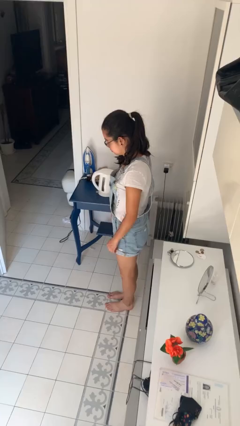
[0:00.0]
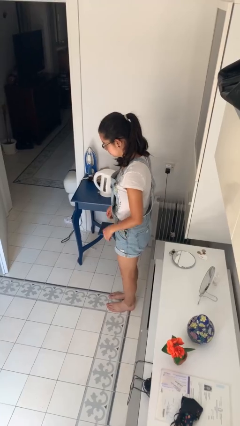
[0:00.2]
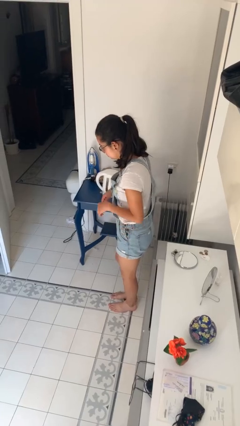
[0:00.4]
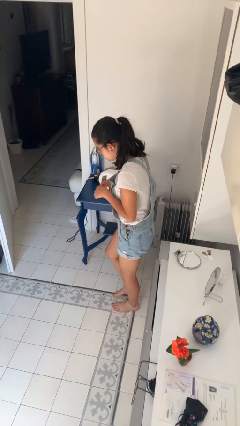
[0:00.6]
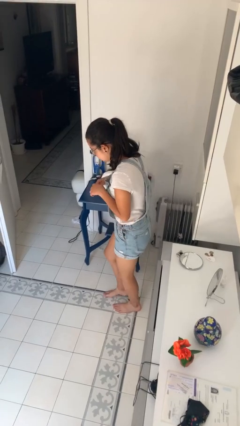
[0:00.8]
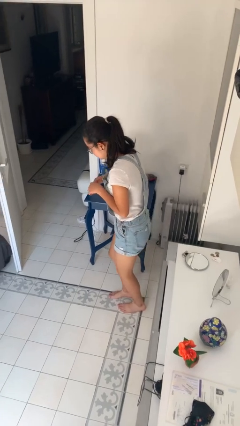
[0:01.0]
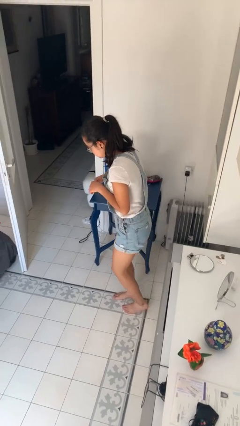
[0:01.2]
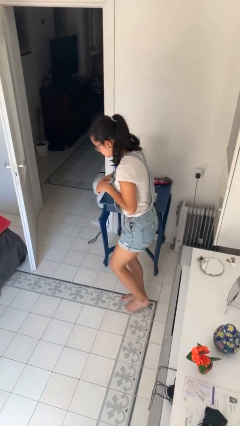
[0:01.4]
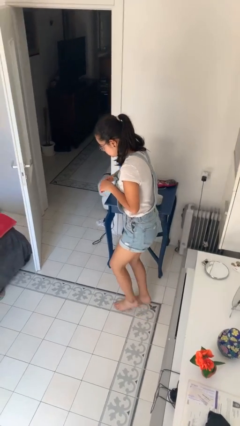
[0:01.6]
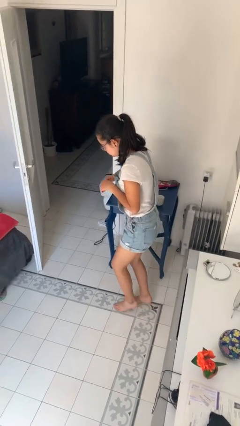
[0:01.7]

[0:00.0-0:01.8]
person walks tiptoe

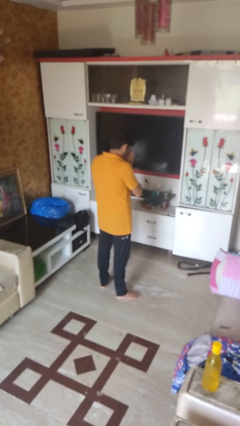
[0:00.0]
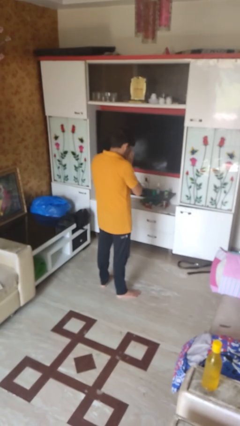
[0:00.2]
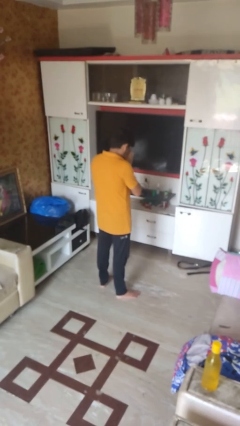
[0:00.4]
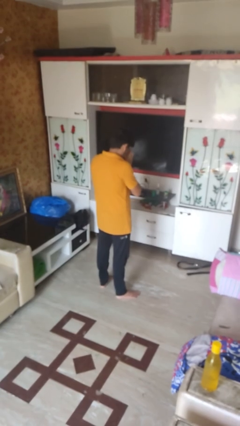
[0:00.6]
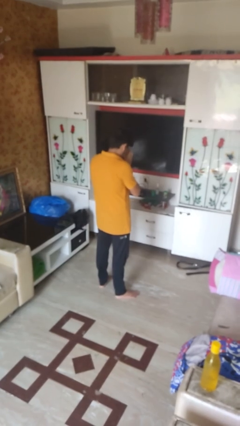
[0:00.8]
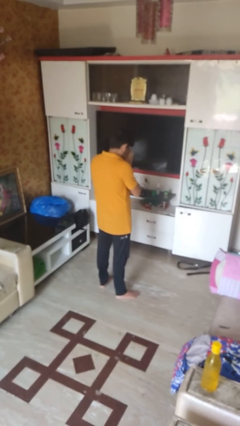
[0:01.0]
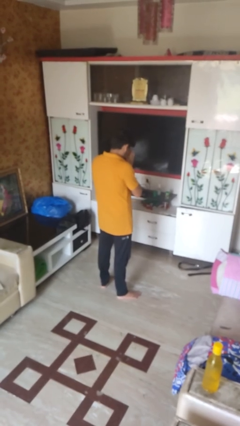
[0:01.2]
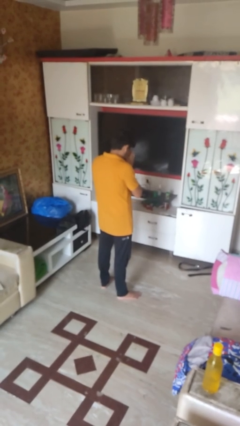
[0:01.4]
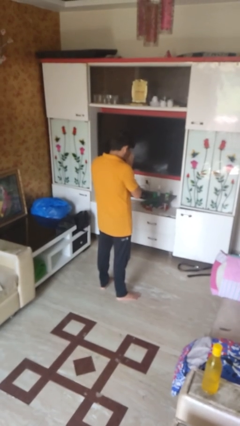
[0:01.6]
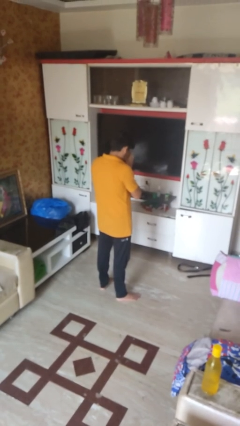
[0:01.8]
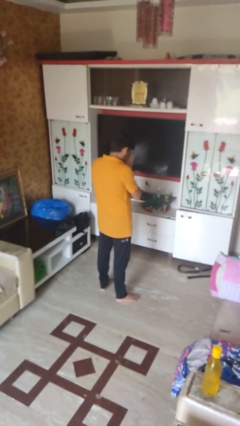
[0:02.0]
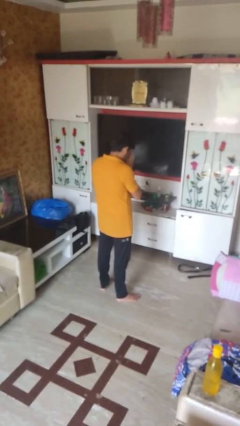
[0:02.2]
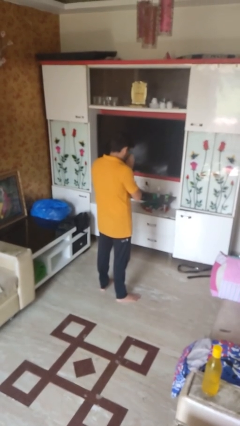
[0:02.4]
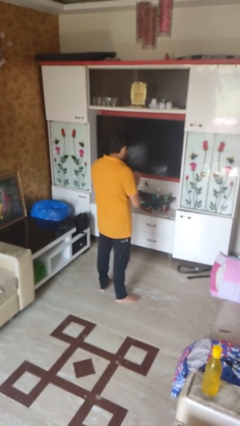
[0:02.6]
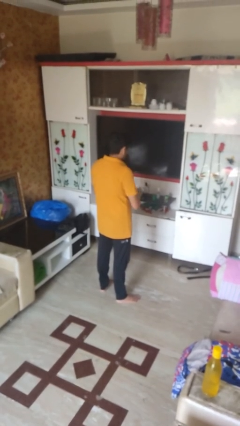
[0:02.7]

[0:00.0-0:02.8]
person prays

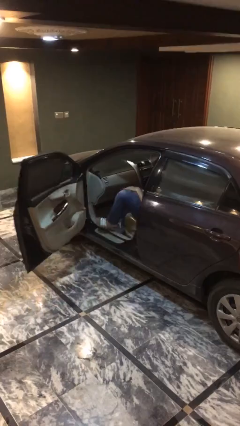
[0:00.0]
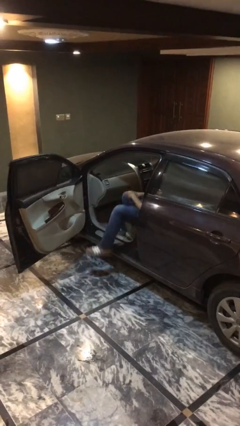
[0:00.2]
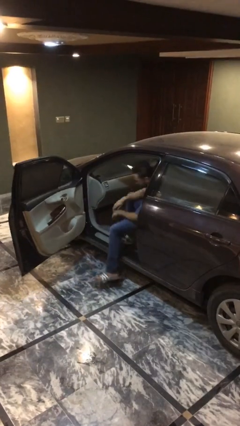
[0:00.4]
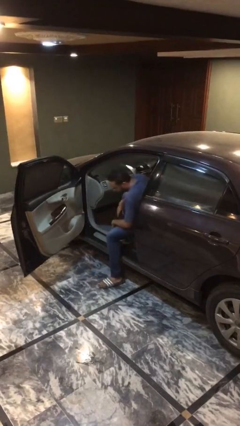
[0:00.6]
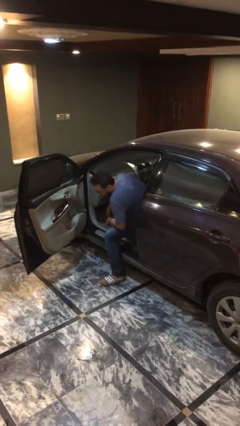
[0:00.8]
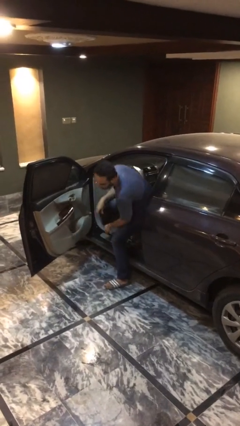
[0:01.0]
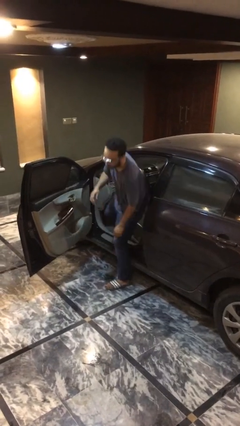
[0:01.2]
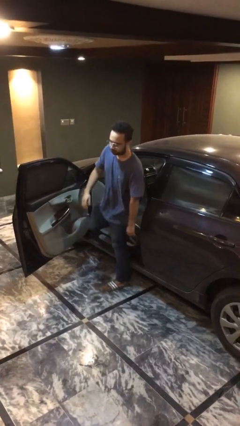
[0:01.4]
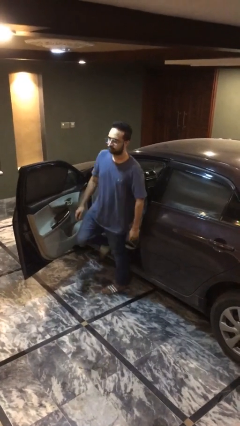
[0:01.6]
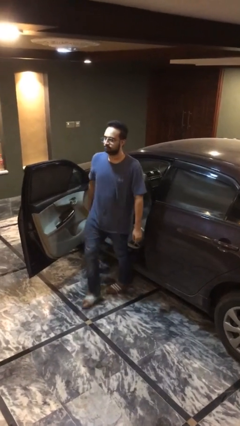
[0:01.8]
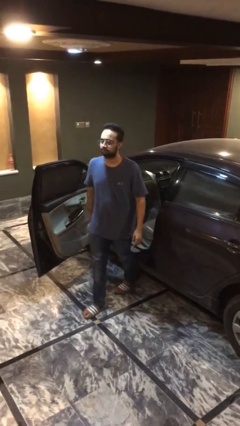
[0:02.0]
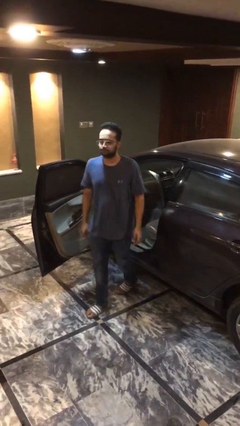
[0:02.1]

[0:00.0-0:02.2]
person exits car

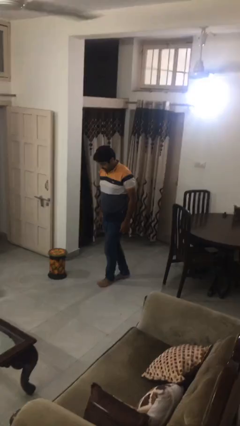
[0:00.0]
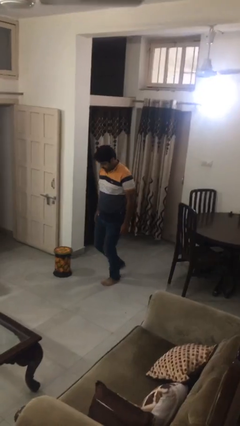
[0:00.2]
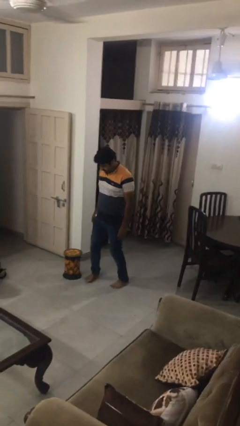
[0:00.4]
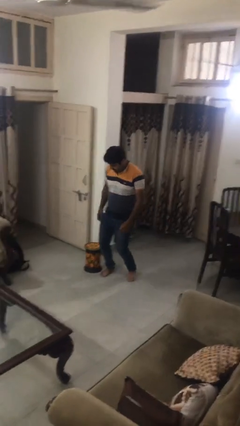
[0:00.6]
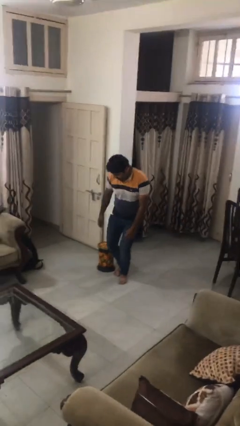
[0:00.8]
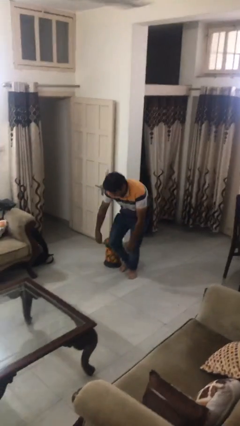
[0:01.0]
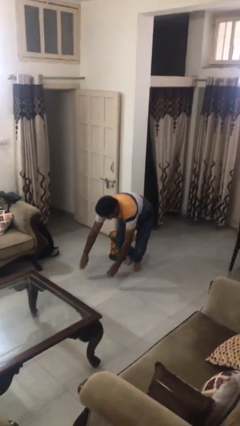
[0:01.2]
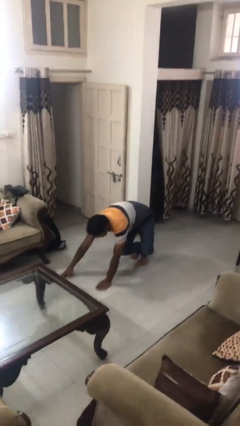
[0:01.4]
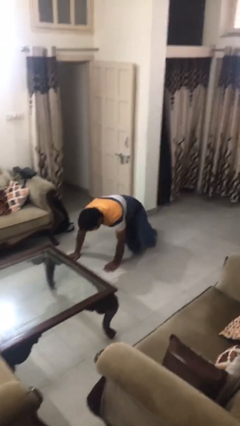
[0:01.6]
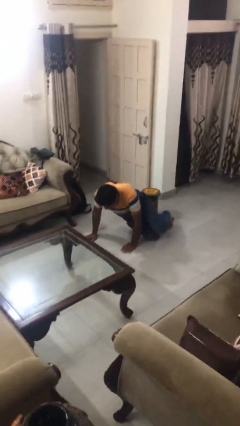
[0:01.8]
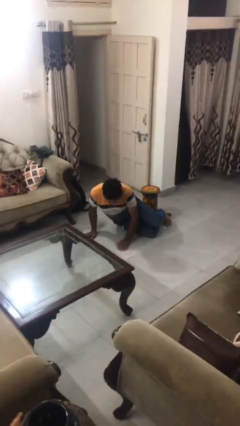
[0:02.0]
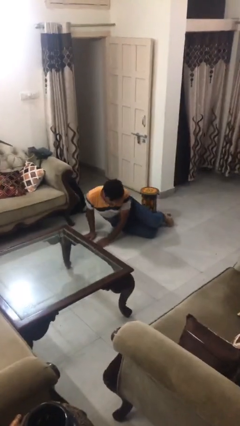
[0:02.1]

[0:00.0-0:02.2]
person trips on object on floor

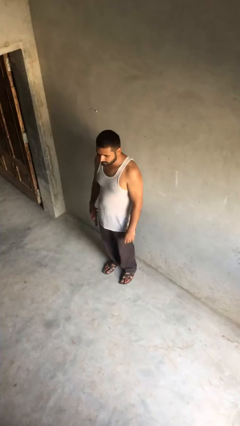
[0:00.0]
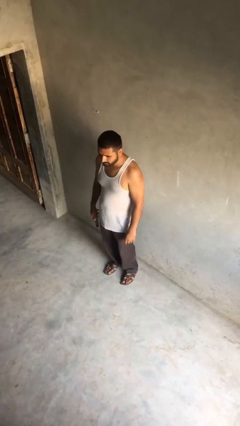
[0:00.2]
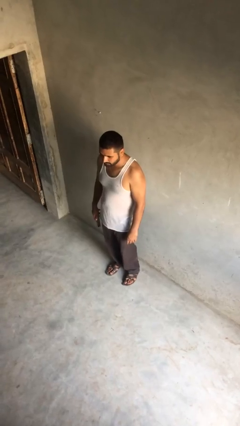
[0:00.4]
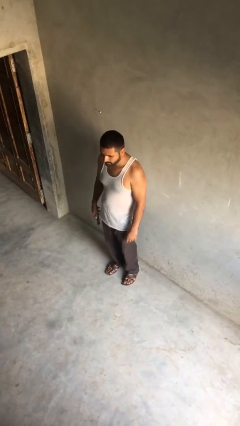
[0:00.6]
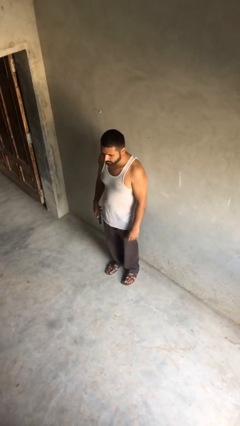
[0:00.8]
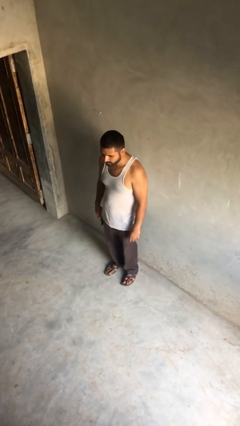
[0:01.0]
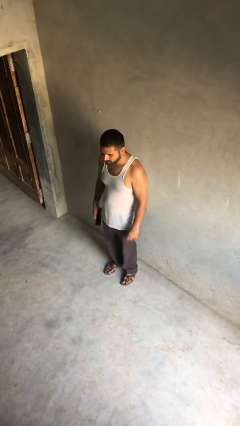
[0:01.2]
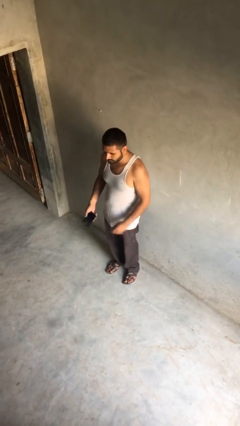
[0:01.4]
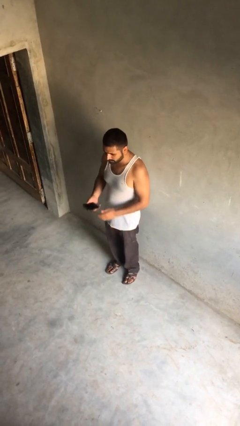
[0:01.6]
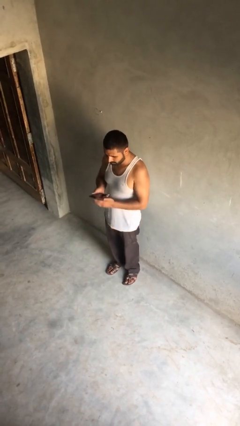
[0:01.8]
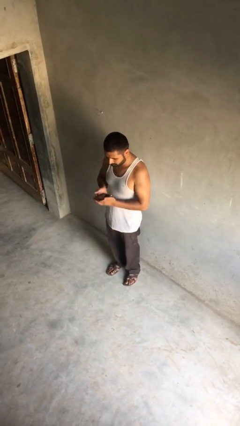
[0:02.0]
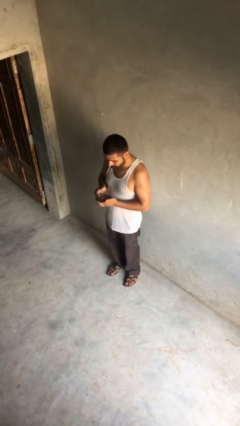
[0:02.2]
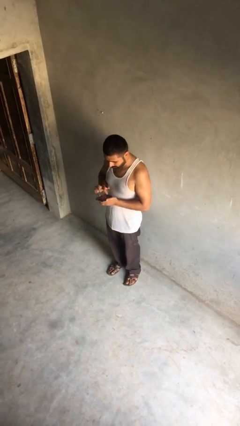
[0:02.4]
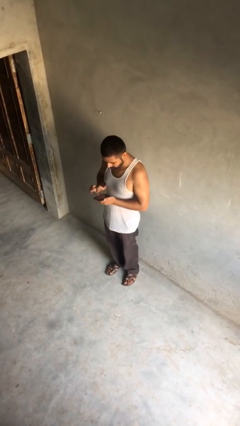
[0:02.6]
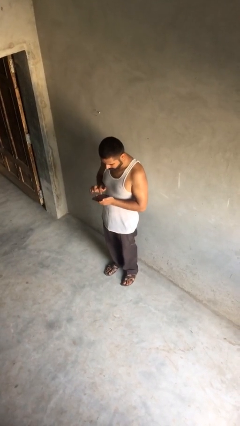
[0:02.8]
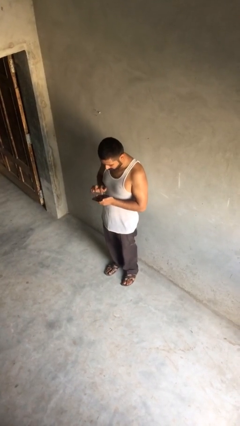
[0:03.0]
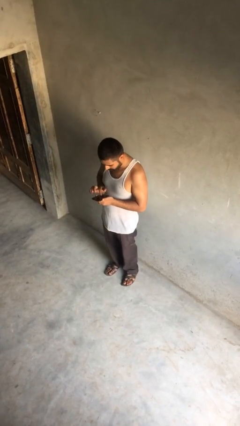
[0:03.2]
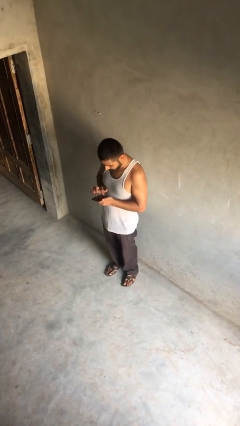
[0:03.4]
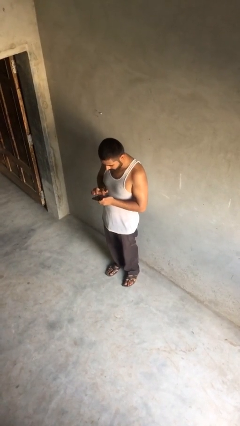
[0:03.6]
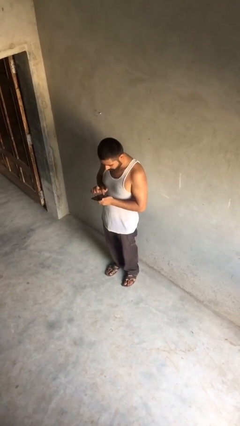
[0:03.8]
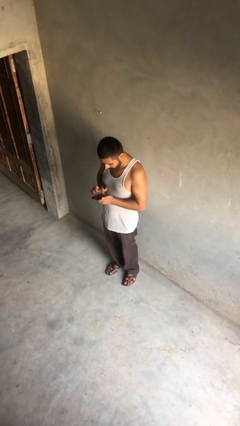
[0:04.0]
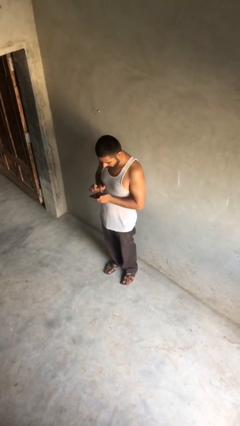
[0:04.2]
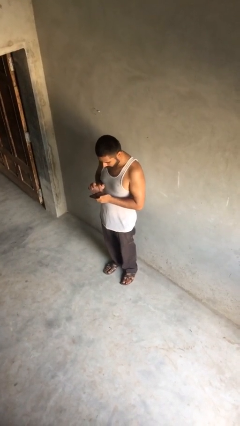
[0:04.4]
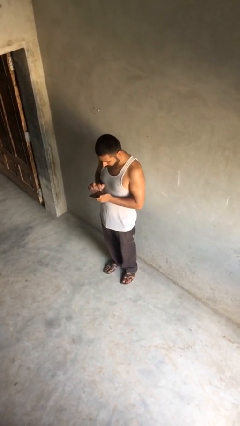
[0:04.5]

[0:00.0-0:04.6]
person texts on phone

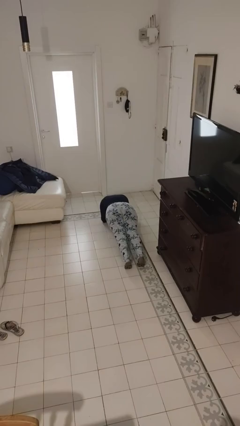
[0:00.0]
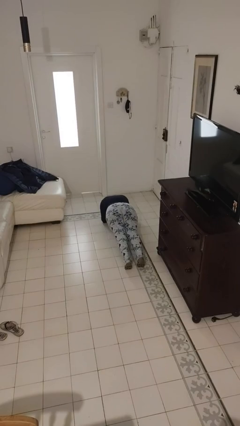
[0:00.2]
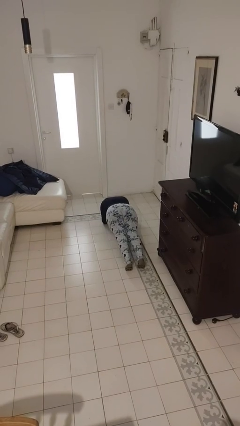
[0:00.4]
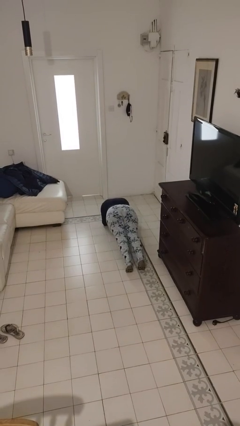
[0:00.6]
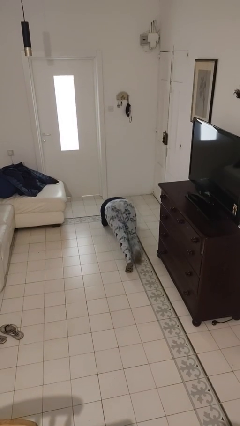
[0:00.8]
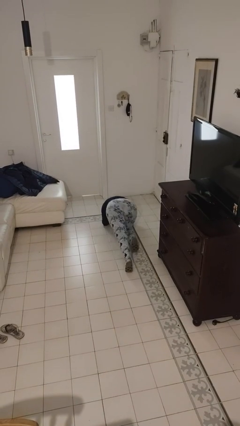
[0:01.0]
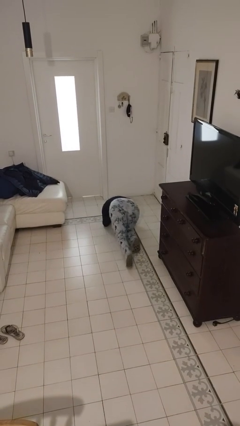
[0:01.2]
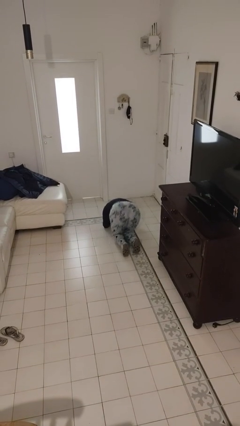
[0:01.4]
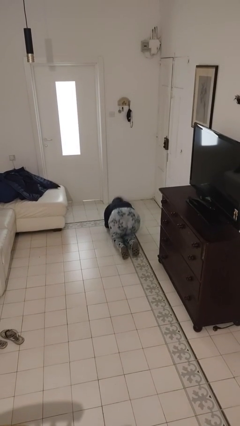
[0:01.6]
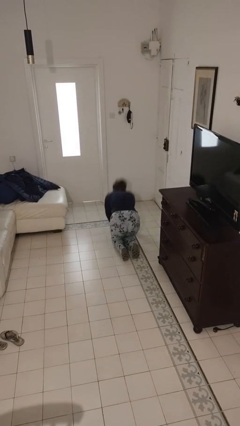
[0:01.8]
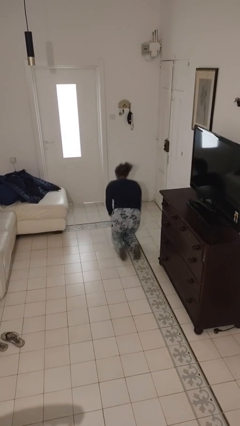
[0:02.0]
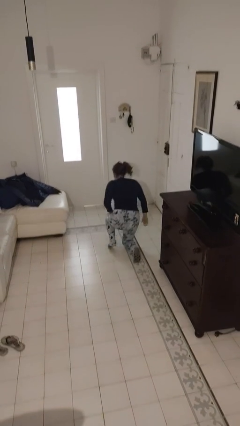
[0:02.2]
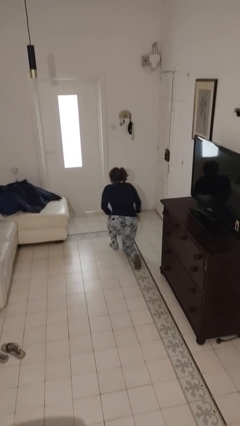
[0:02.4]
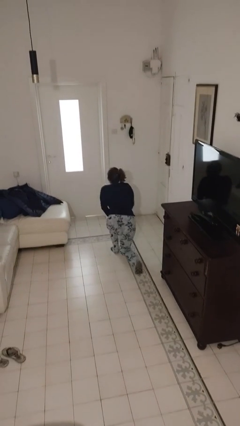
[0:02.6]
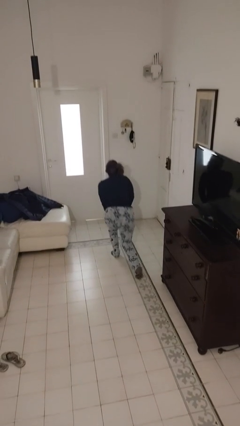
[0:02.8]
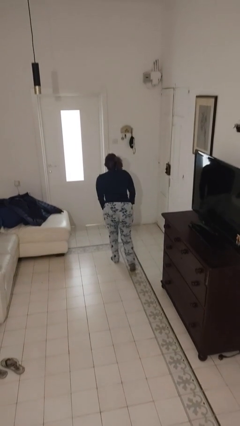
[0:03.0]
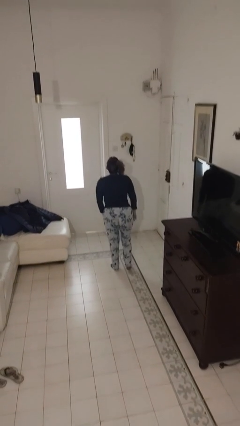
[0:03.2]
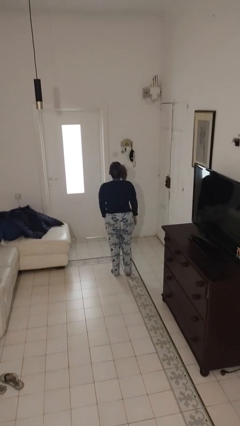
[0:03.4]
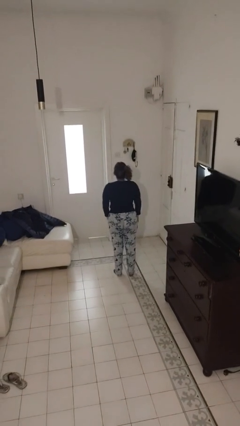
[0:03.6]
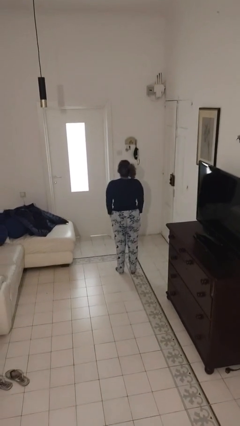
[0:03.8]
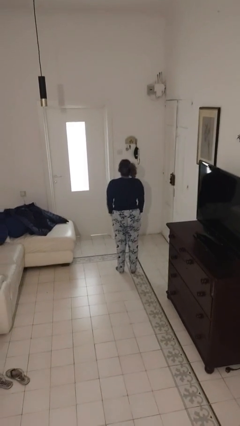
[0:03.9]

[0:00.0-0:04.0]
person stands up from floor

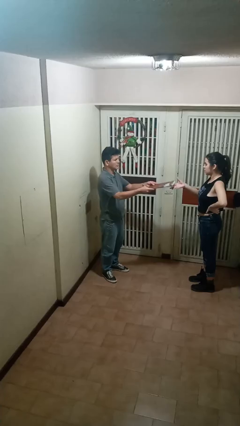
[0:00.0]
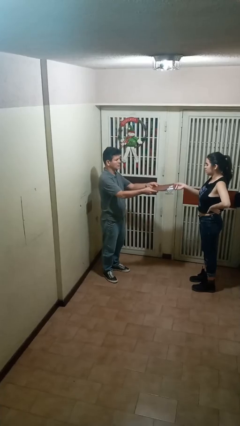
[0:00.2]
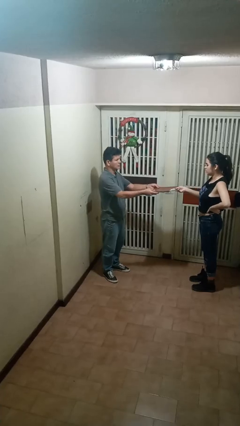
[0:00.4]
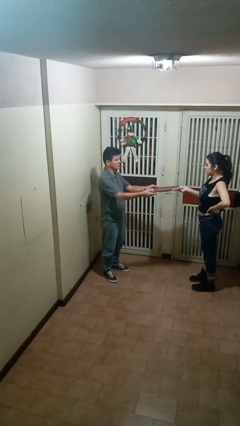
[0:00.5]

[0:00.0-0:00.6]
person transfers object to person
